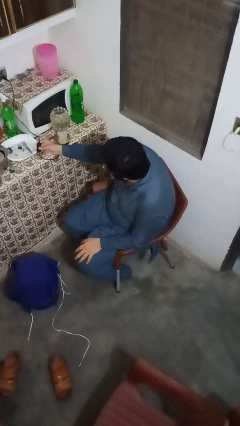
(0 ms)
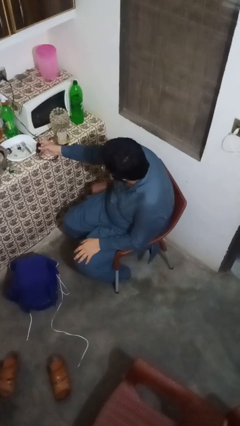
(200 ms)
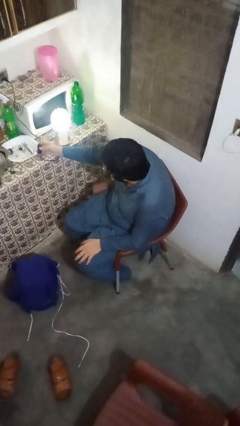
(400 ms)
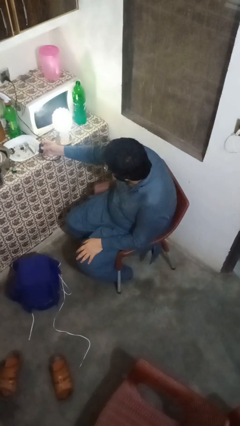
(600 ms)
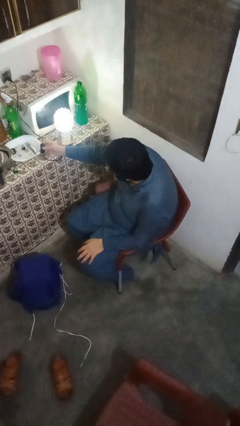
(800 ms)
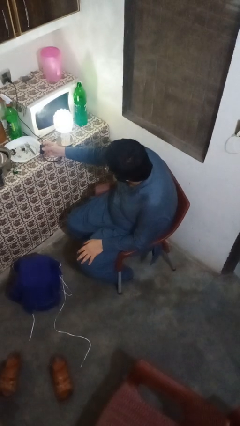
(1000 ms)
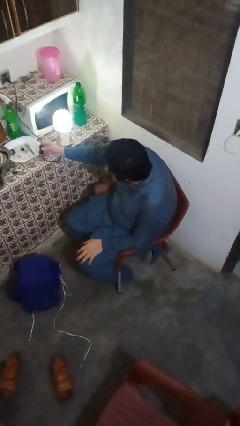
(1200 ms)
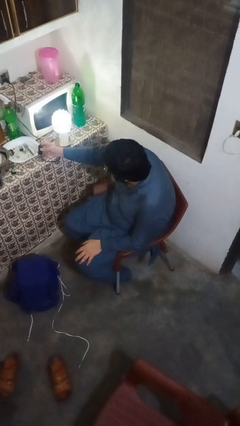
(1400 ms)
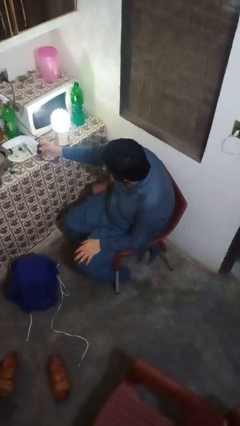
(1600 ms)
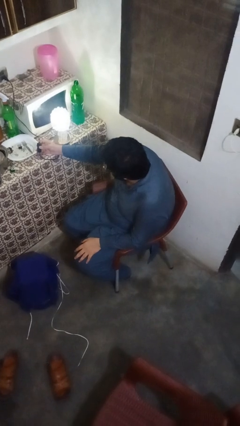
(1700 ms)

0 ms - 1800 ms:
person turns on lamp

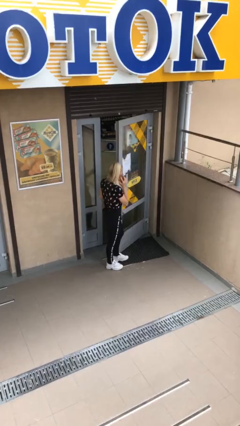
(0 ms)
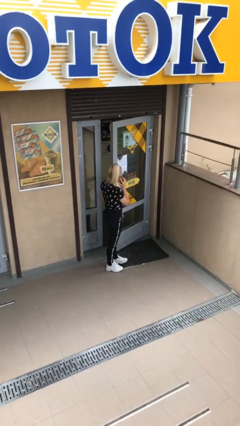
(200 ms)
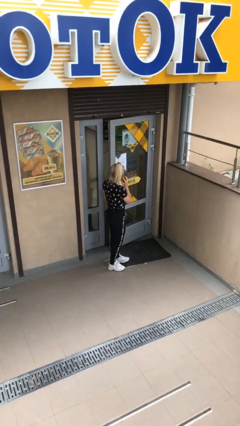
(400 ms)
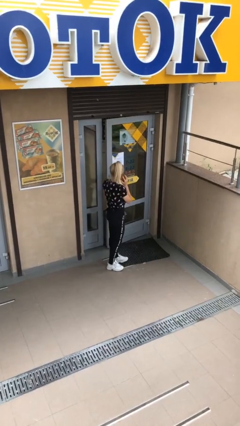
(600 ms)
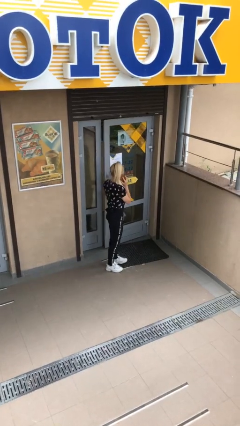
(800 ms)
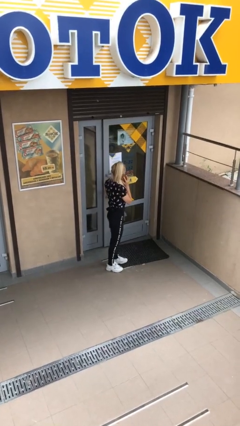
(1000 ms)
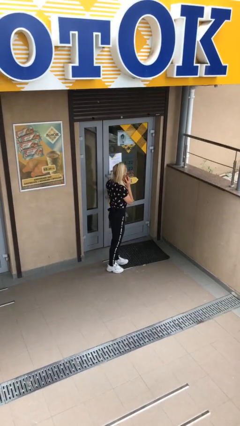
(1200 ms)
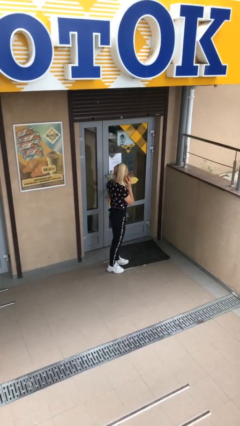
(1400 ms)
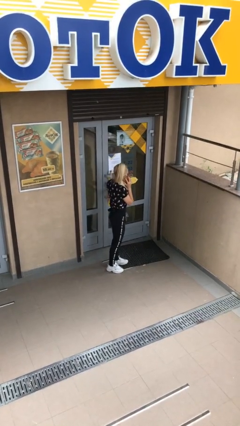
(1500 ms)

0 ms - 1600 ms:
person closes facility door

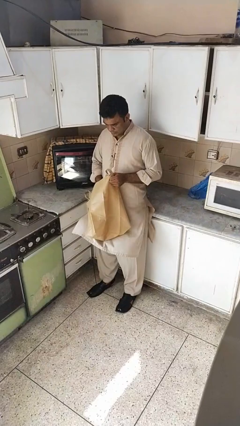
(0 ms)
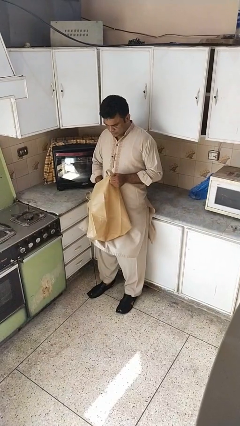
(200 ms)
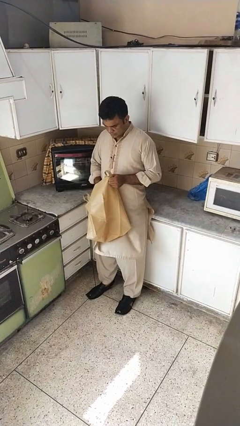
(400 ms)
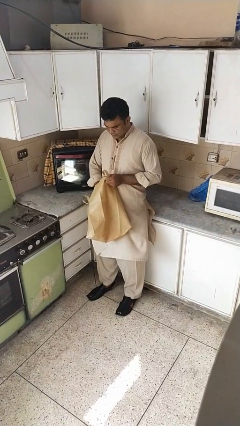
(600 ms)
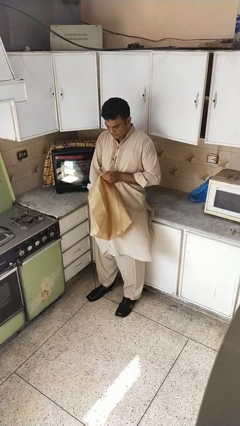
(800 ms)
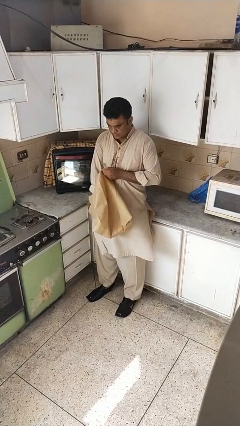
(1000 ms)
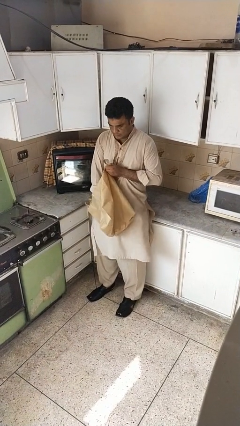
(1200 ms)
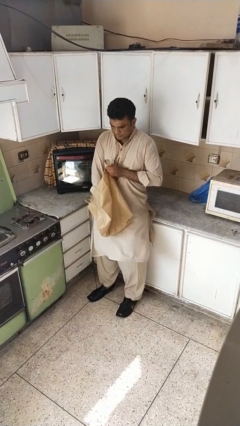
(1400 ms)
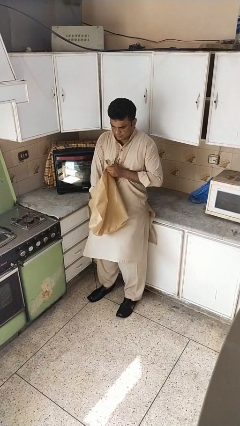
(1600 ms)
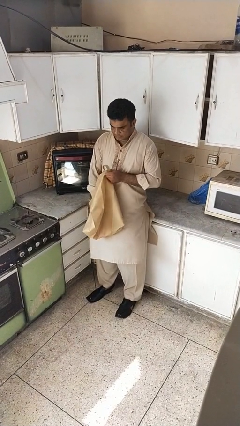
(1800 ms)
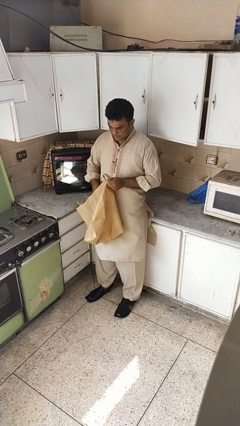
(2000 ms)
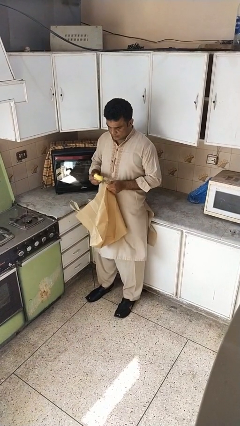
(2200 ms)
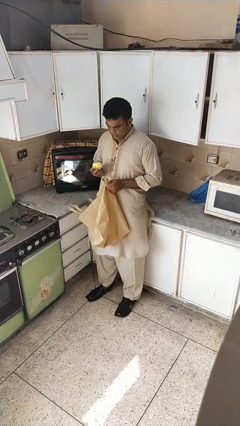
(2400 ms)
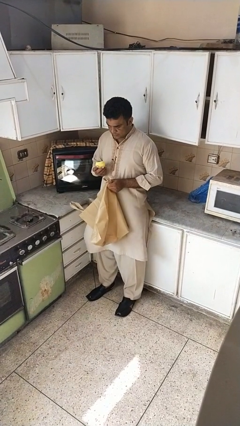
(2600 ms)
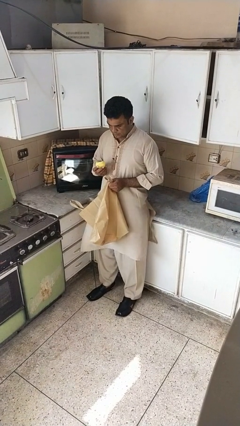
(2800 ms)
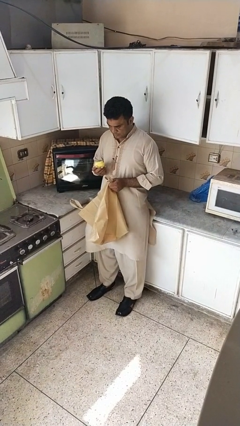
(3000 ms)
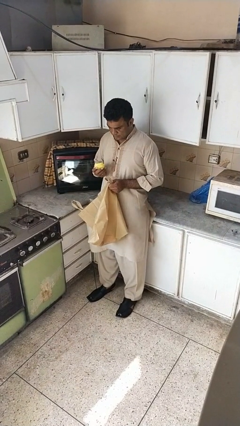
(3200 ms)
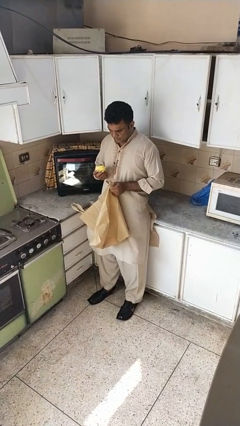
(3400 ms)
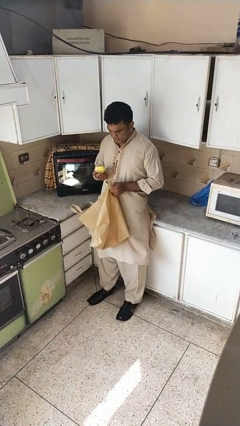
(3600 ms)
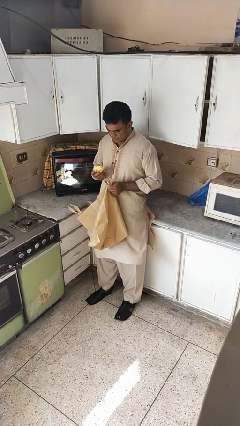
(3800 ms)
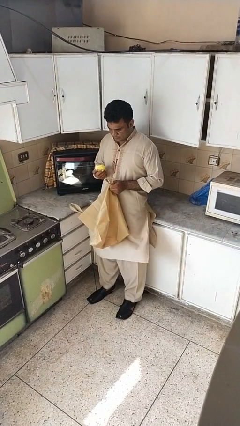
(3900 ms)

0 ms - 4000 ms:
person takes object from bag

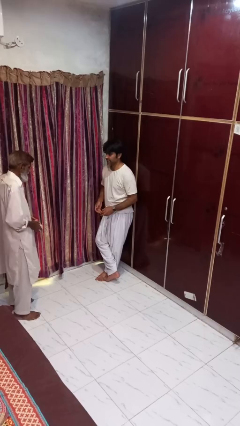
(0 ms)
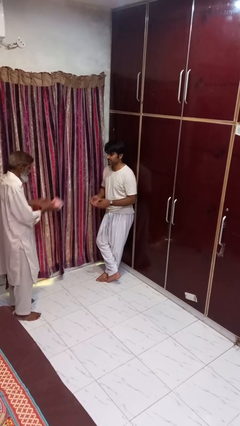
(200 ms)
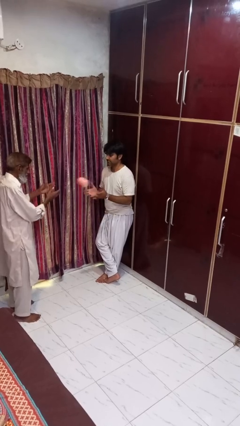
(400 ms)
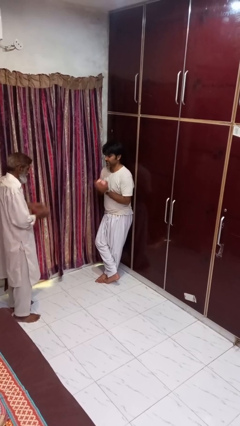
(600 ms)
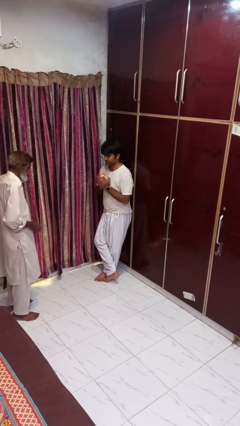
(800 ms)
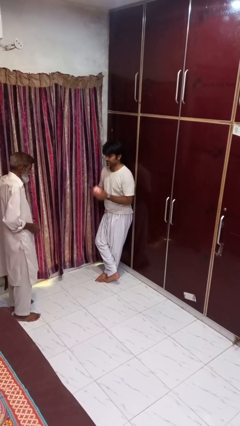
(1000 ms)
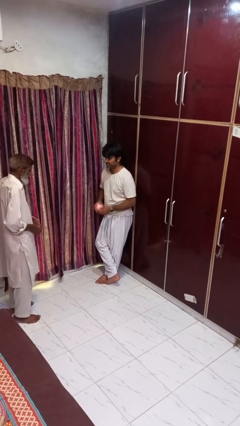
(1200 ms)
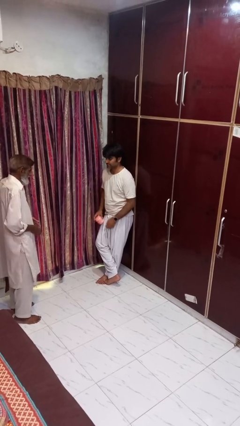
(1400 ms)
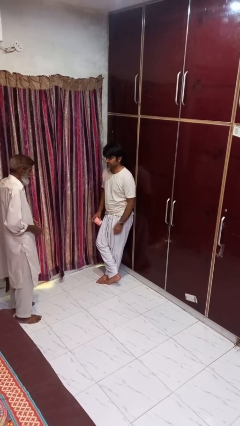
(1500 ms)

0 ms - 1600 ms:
person catches object from person

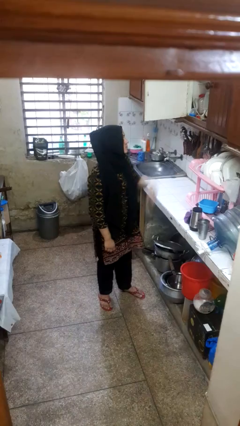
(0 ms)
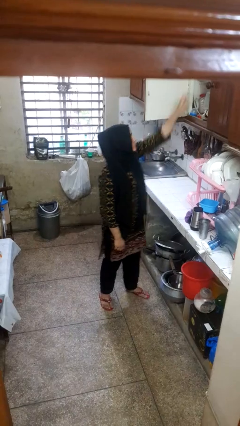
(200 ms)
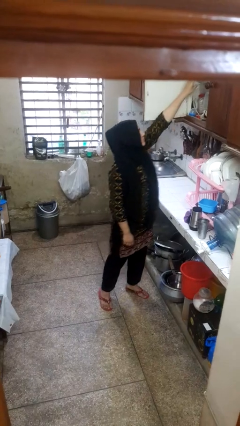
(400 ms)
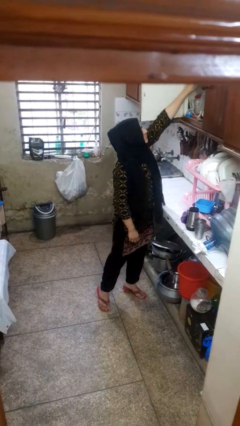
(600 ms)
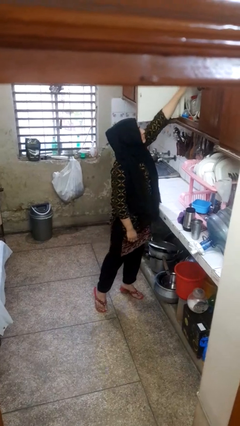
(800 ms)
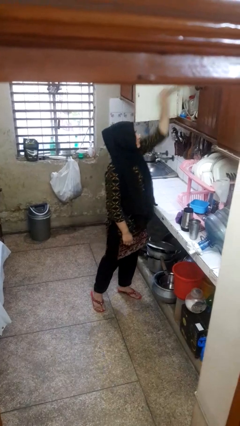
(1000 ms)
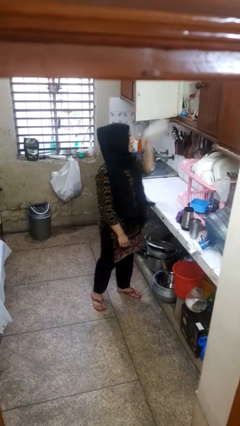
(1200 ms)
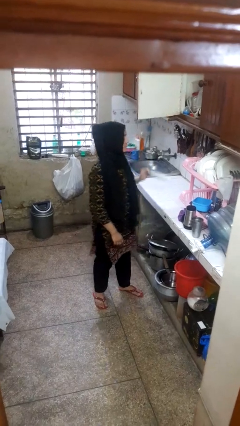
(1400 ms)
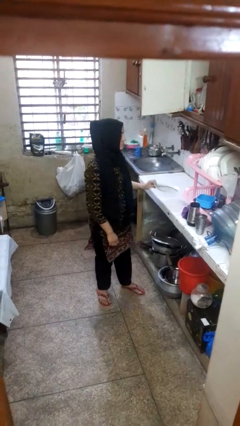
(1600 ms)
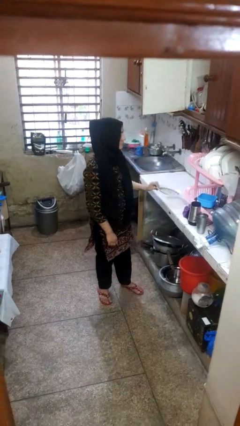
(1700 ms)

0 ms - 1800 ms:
person takes object from cabinet

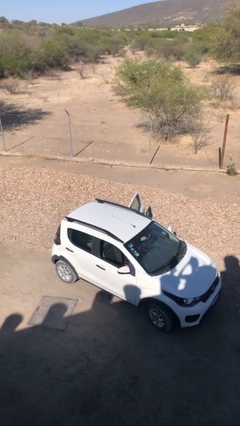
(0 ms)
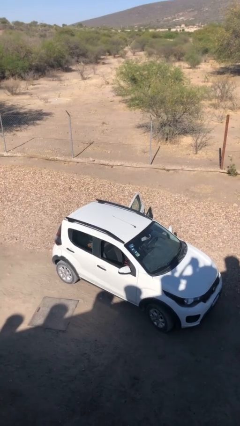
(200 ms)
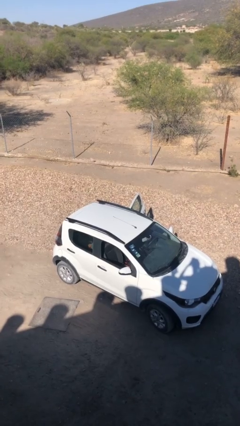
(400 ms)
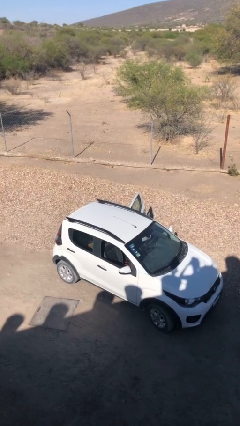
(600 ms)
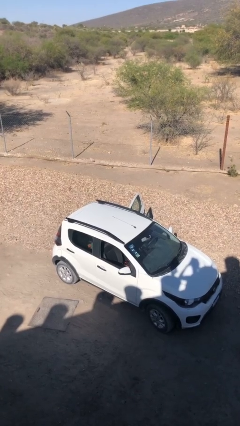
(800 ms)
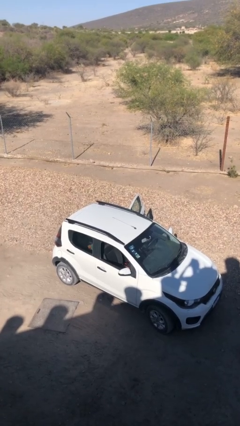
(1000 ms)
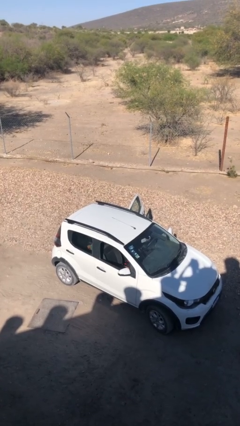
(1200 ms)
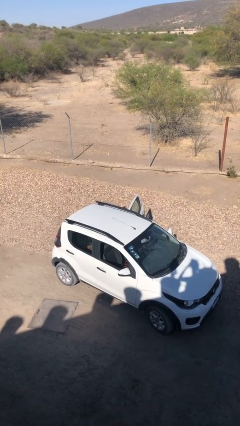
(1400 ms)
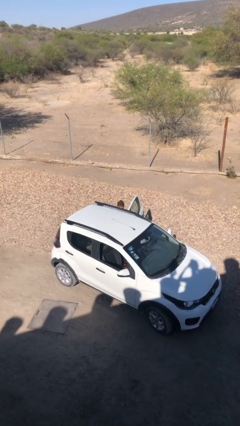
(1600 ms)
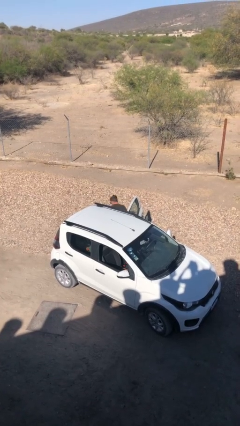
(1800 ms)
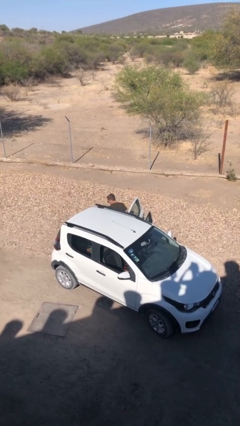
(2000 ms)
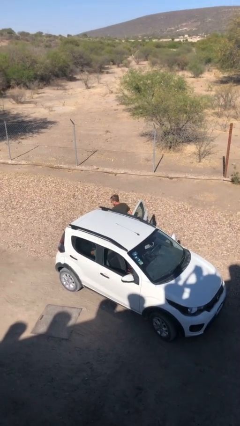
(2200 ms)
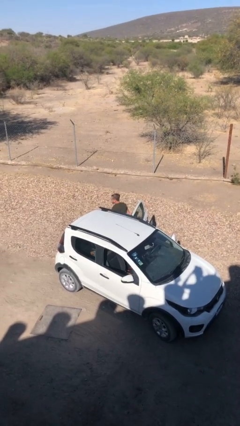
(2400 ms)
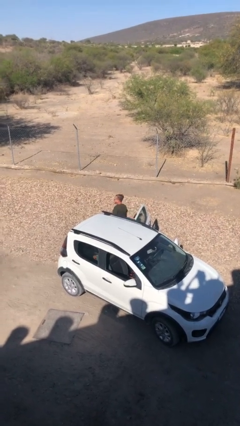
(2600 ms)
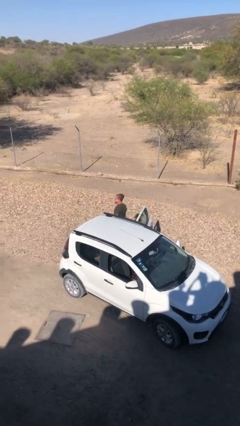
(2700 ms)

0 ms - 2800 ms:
person exits car

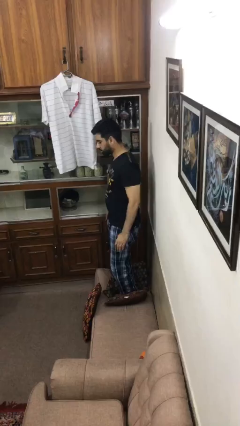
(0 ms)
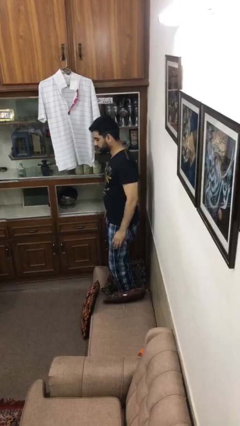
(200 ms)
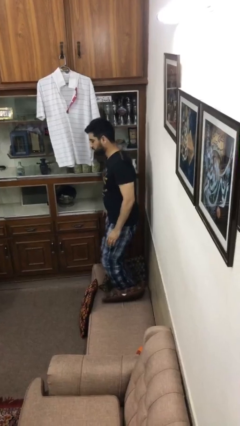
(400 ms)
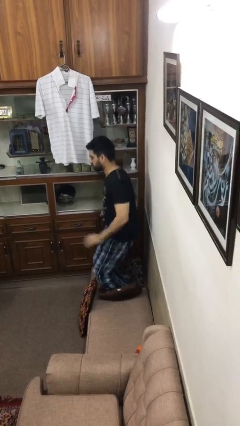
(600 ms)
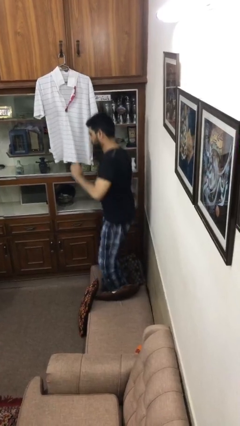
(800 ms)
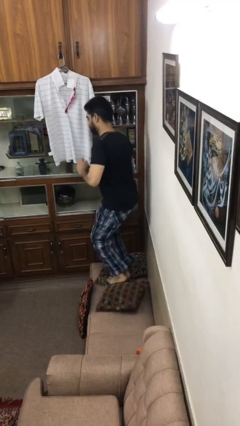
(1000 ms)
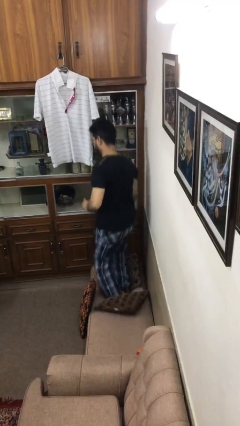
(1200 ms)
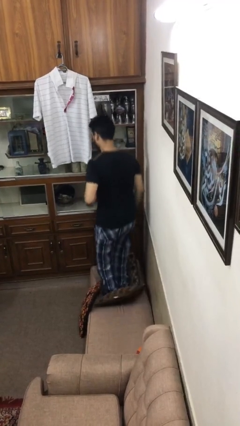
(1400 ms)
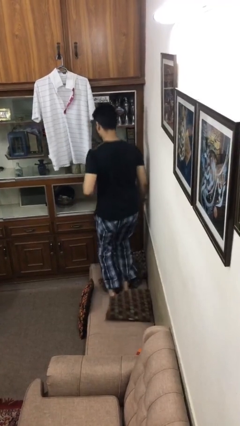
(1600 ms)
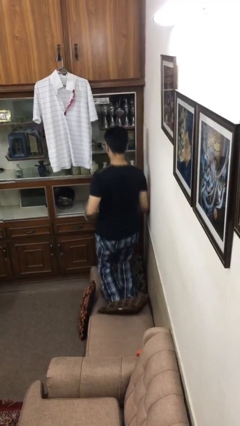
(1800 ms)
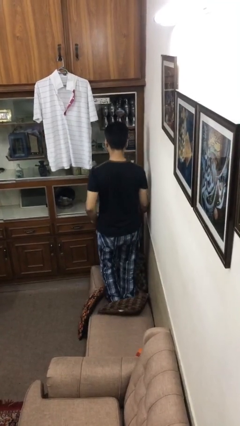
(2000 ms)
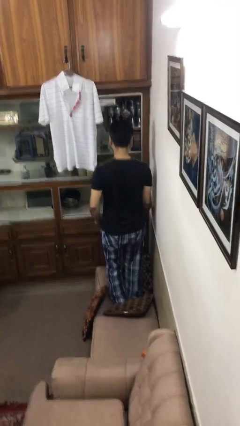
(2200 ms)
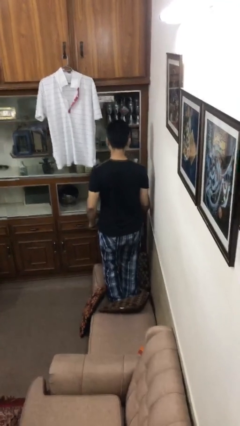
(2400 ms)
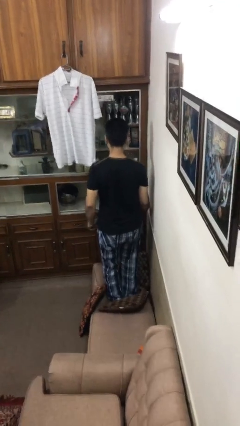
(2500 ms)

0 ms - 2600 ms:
person jumps on couch

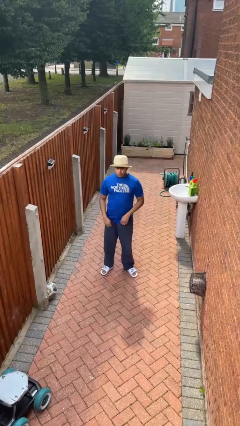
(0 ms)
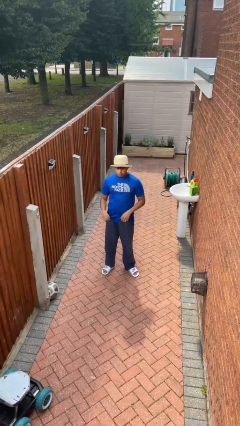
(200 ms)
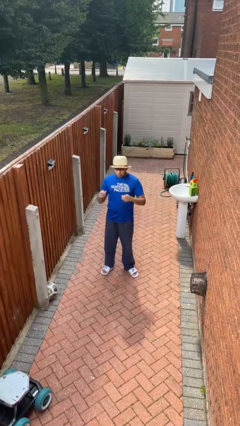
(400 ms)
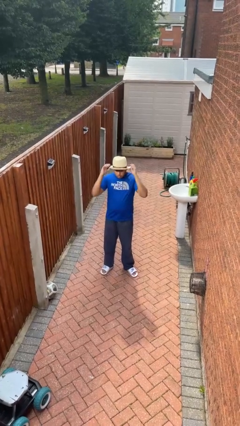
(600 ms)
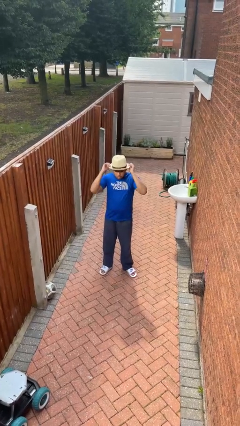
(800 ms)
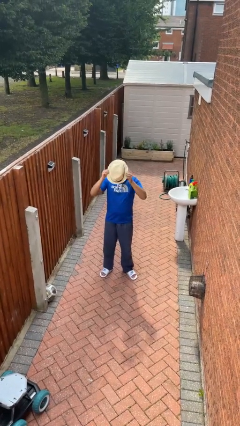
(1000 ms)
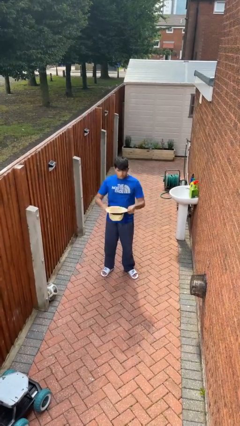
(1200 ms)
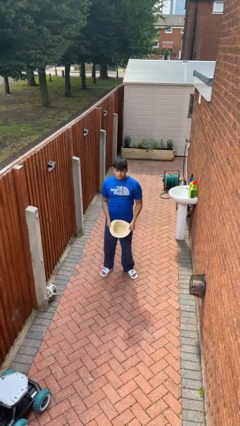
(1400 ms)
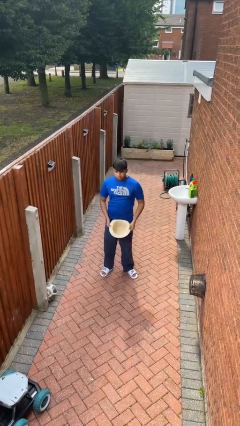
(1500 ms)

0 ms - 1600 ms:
person takes off hat
